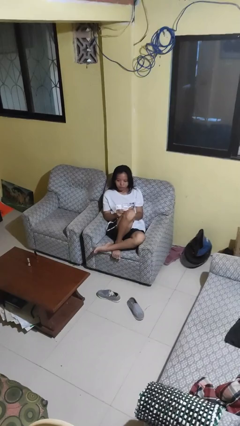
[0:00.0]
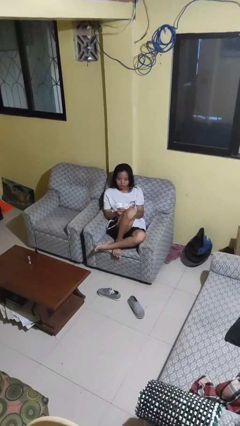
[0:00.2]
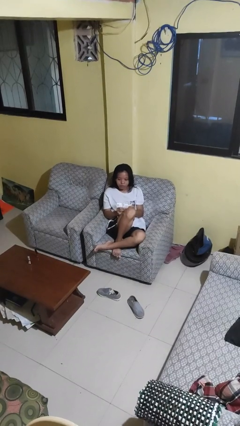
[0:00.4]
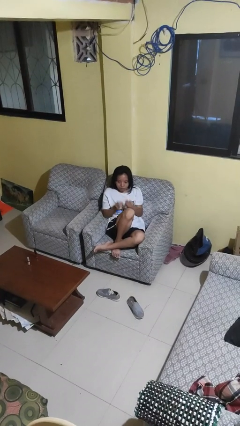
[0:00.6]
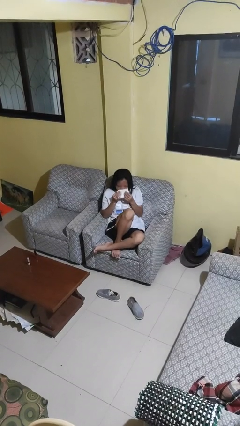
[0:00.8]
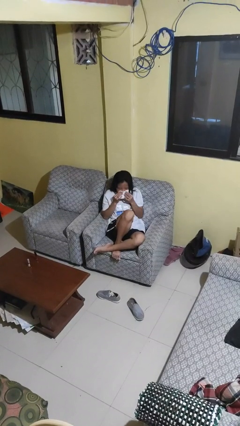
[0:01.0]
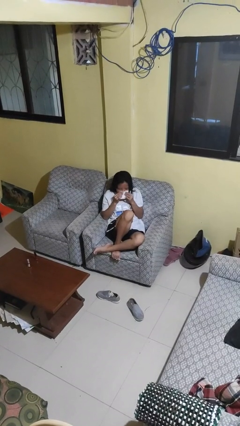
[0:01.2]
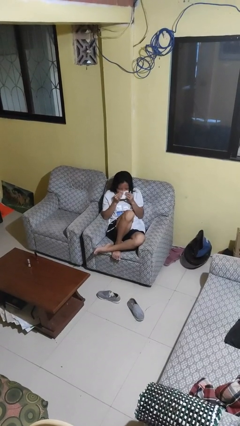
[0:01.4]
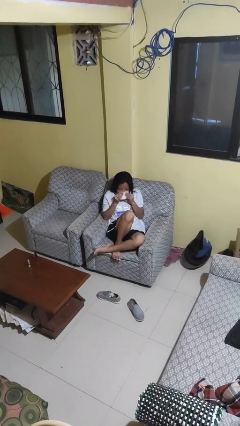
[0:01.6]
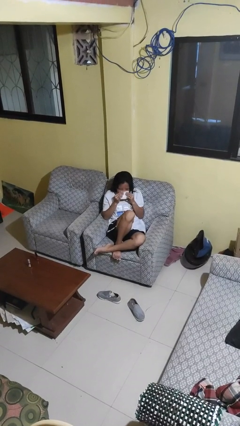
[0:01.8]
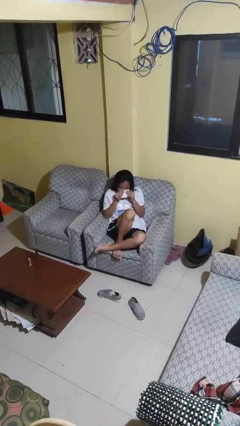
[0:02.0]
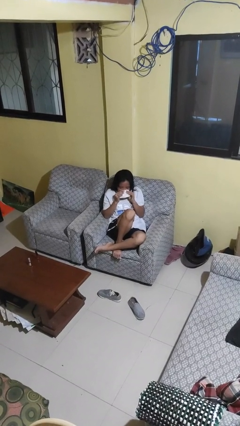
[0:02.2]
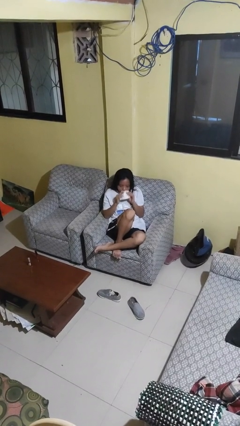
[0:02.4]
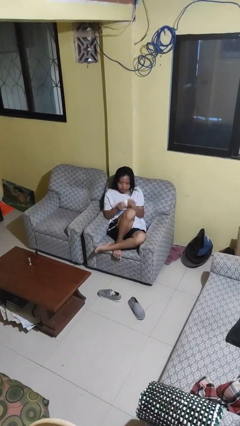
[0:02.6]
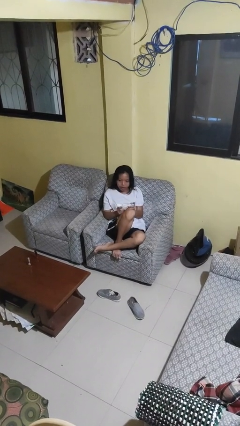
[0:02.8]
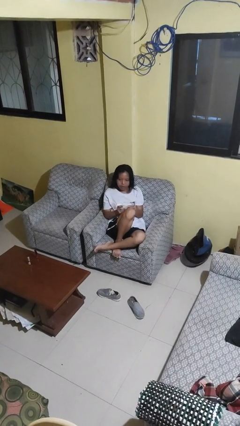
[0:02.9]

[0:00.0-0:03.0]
person blows nose

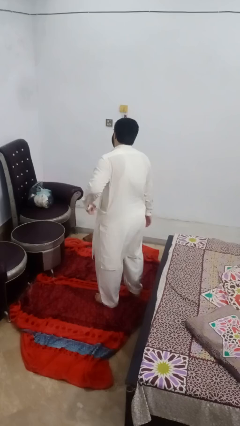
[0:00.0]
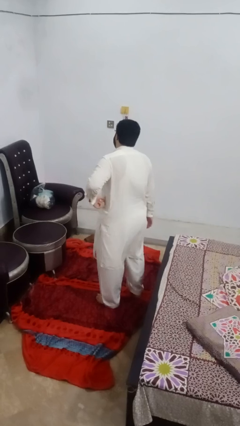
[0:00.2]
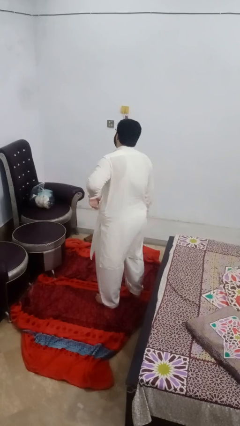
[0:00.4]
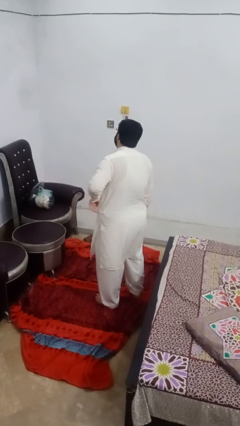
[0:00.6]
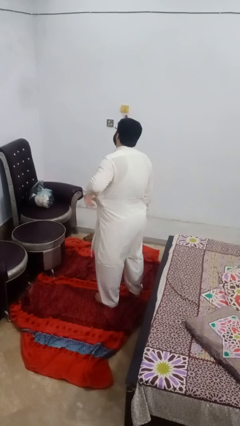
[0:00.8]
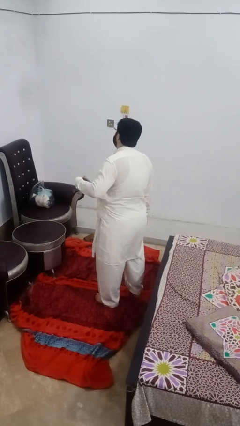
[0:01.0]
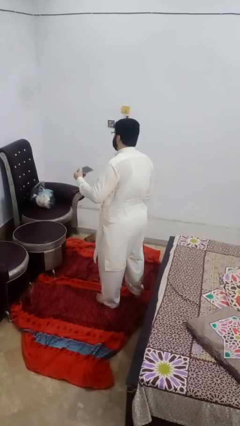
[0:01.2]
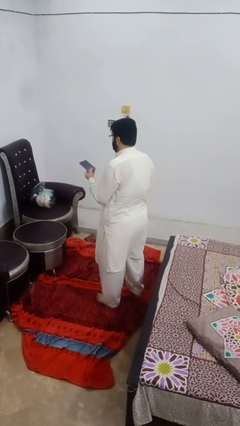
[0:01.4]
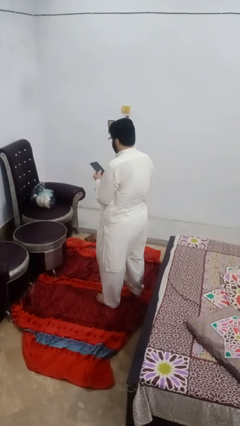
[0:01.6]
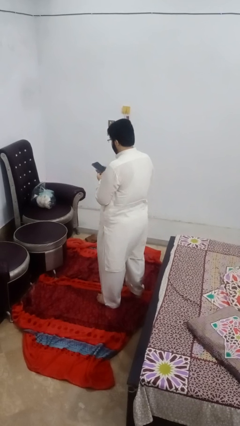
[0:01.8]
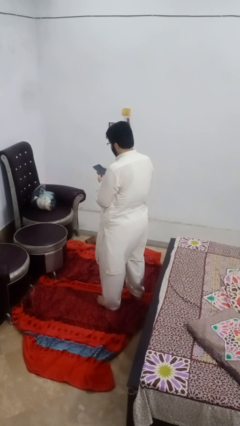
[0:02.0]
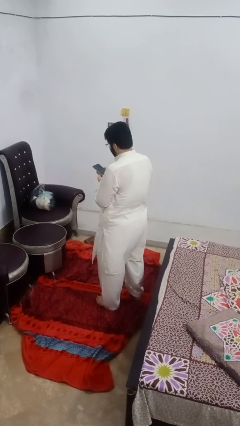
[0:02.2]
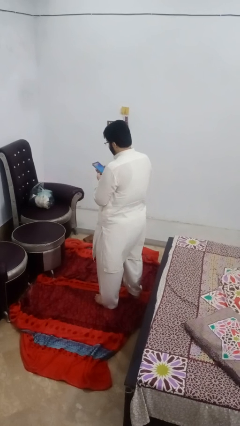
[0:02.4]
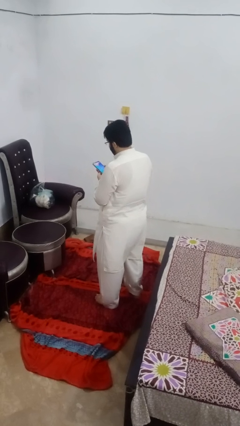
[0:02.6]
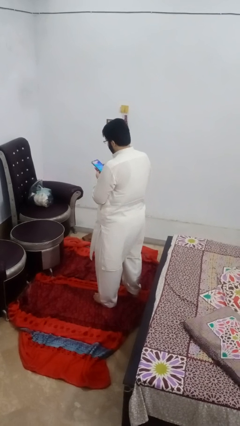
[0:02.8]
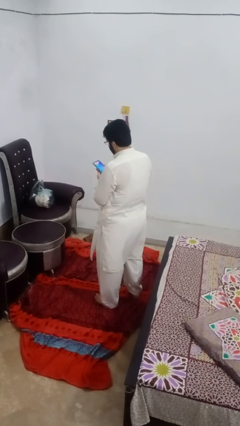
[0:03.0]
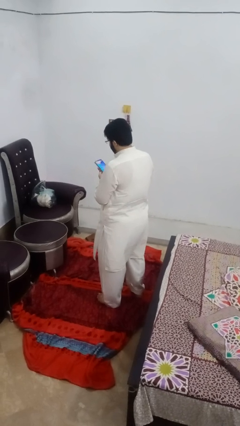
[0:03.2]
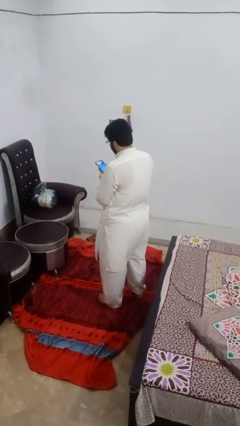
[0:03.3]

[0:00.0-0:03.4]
person takes phone from pocket

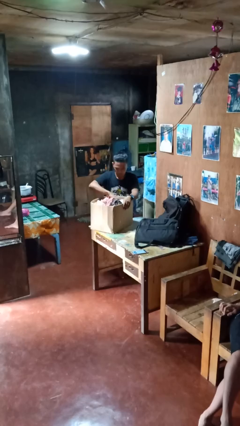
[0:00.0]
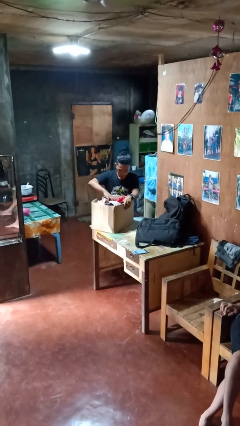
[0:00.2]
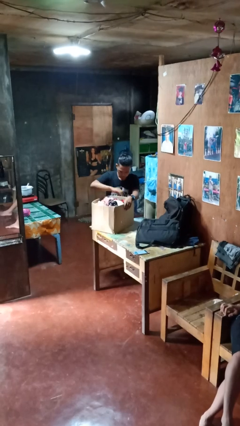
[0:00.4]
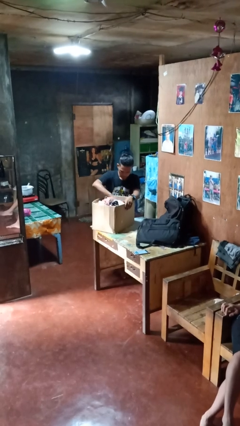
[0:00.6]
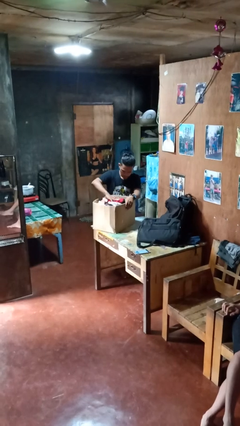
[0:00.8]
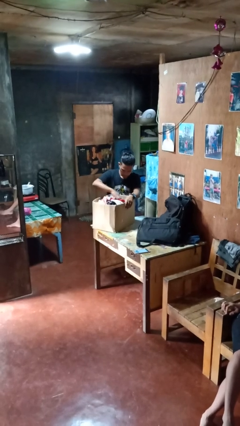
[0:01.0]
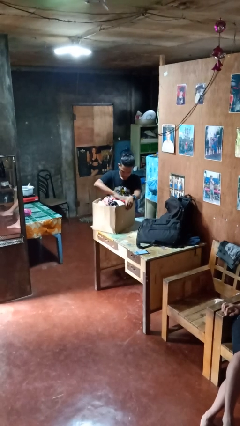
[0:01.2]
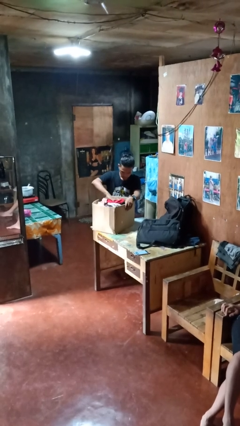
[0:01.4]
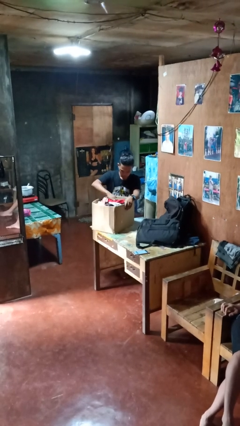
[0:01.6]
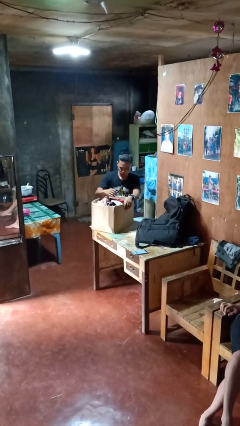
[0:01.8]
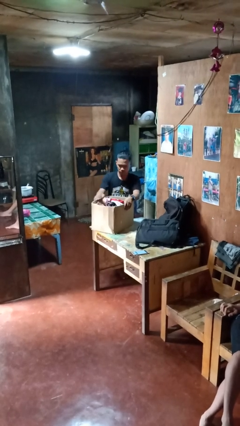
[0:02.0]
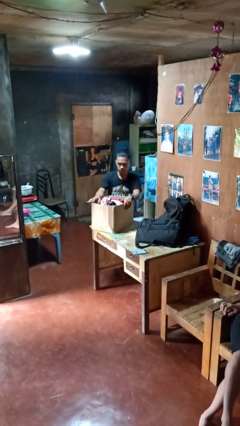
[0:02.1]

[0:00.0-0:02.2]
person searches in box

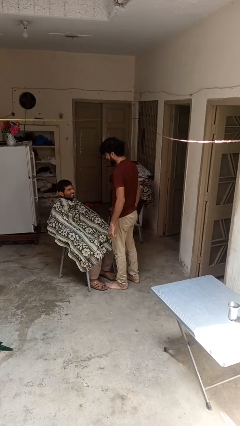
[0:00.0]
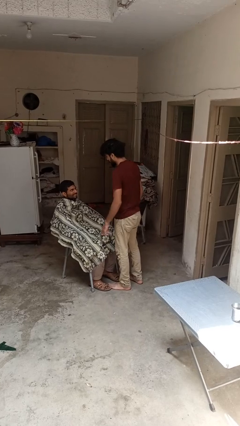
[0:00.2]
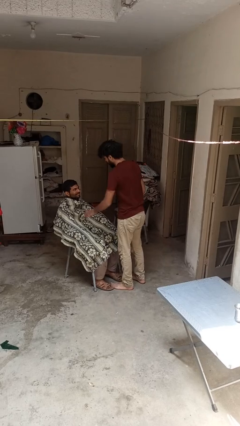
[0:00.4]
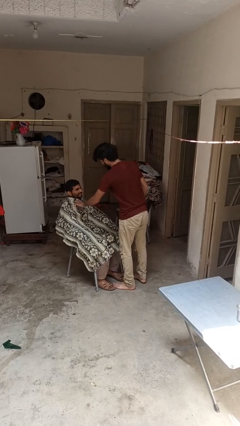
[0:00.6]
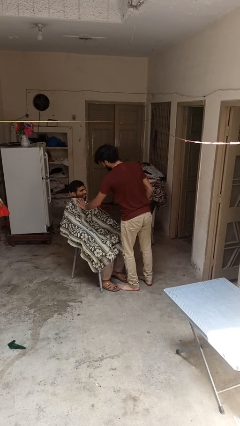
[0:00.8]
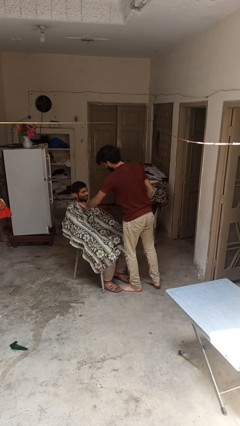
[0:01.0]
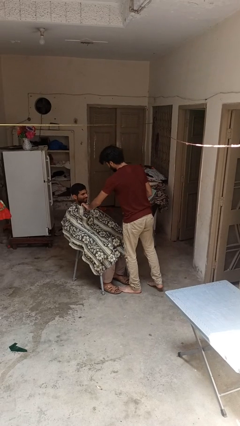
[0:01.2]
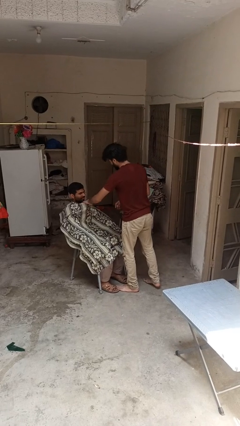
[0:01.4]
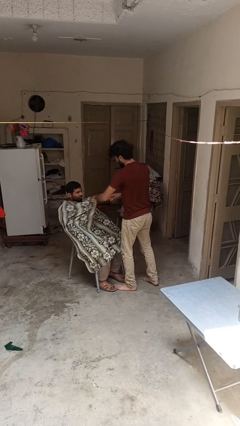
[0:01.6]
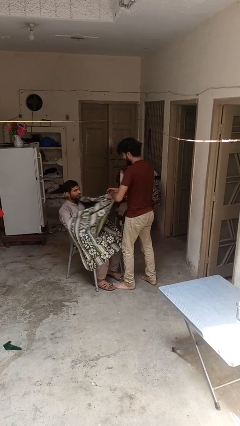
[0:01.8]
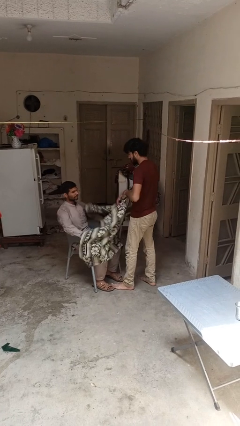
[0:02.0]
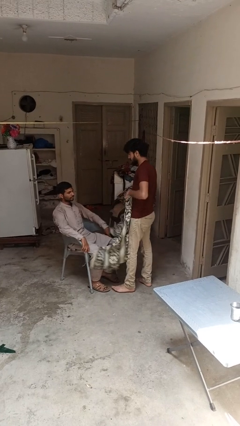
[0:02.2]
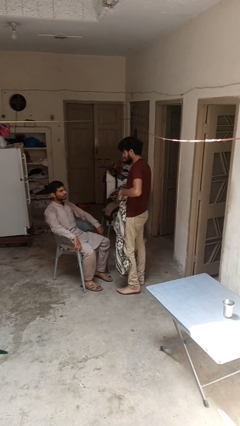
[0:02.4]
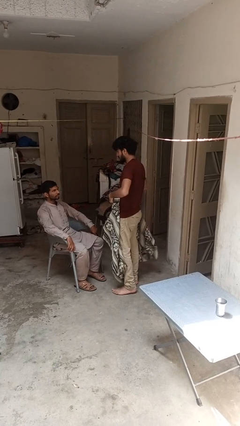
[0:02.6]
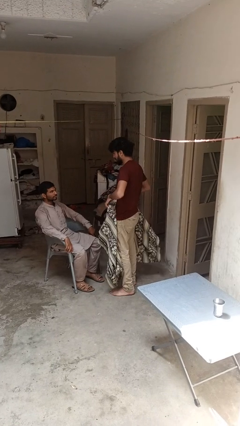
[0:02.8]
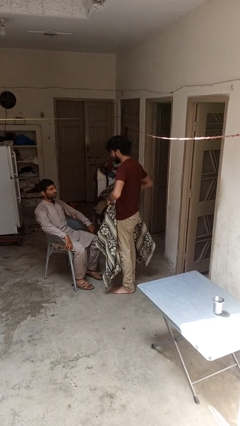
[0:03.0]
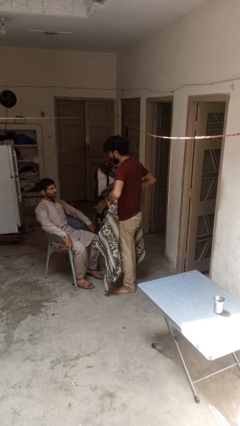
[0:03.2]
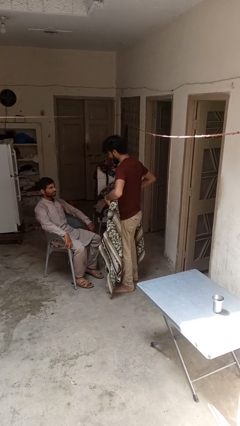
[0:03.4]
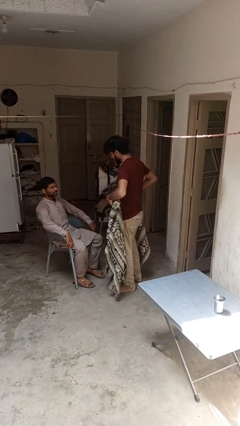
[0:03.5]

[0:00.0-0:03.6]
person uncovers friend with blanket

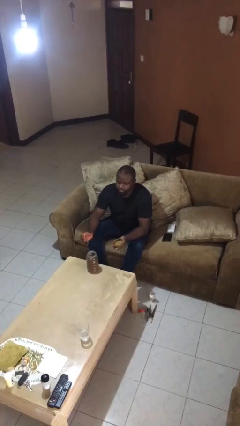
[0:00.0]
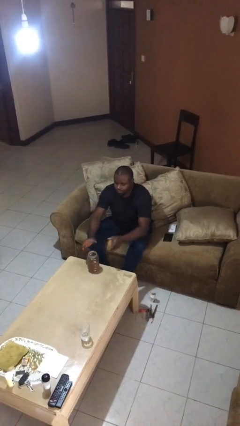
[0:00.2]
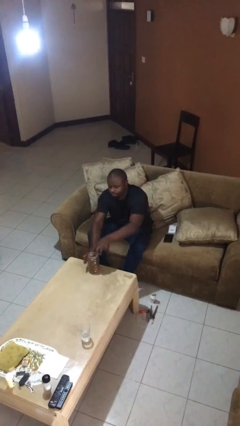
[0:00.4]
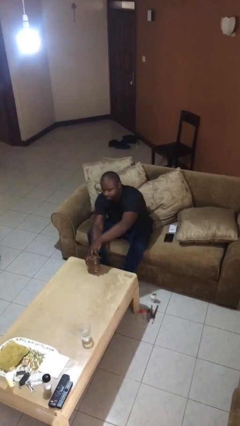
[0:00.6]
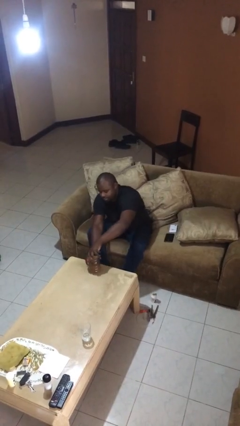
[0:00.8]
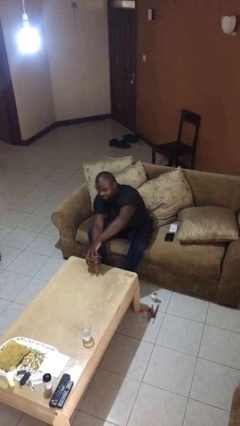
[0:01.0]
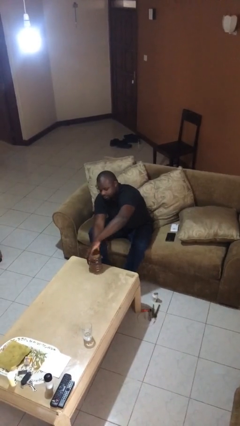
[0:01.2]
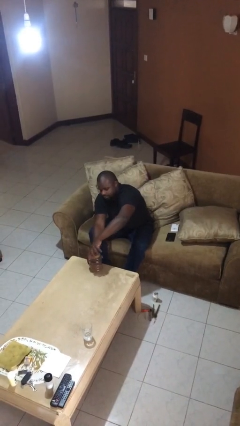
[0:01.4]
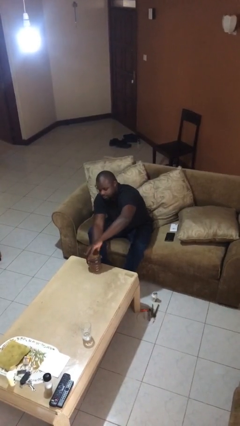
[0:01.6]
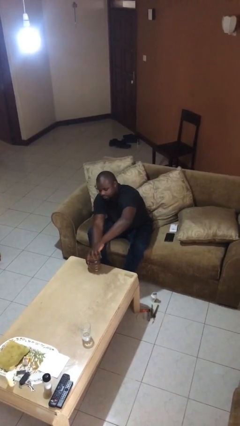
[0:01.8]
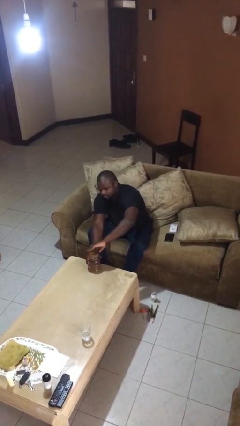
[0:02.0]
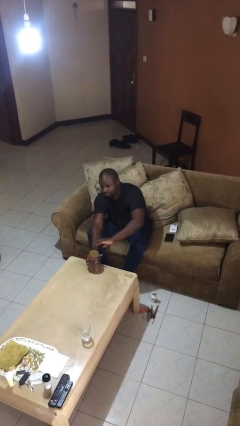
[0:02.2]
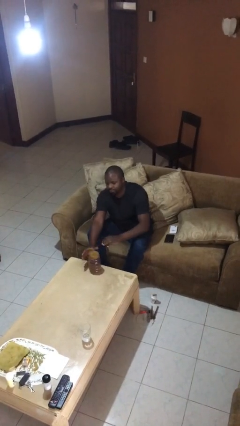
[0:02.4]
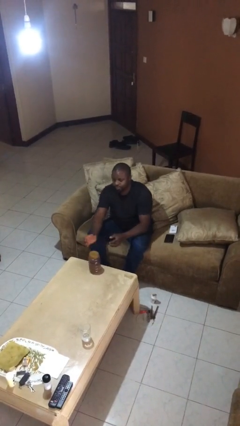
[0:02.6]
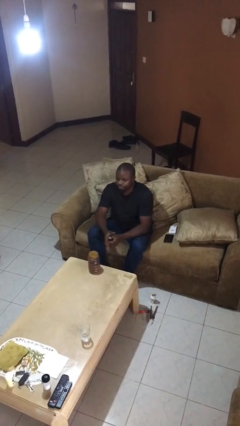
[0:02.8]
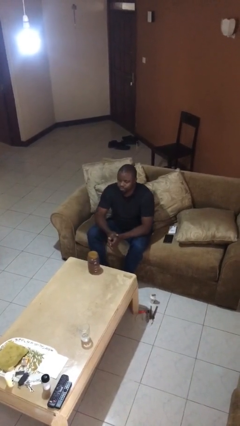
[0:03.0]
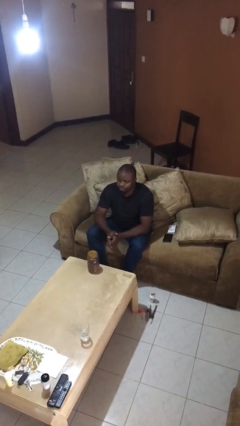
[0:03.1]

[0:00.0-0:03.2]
person closes jar

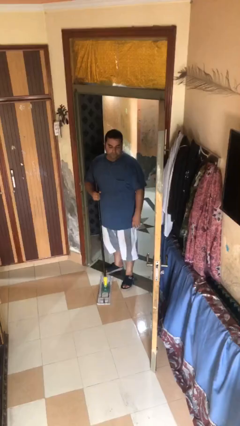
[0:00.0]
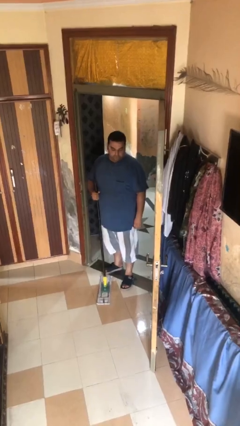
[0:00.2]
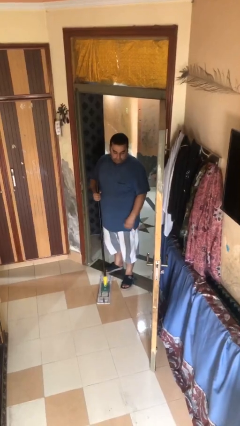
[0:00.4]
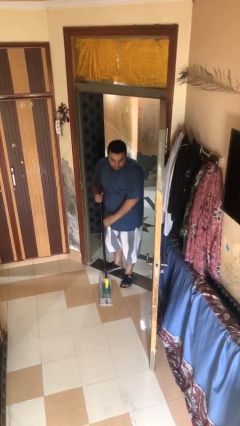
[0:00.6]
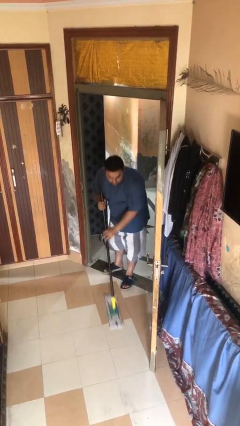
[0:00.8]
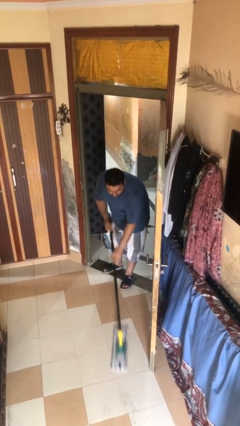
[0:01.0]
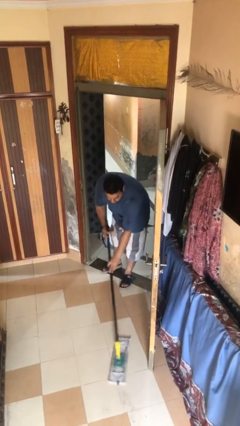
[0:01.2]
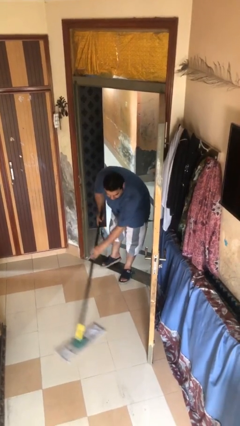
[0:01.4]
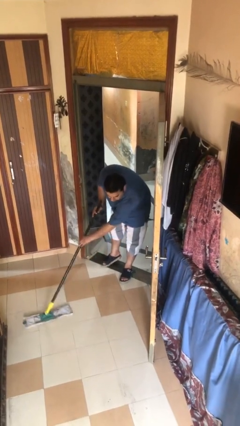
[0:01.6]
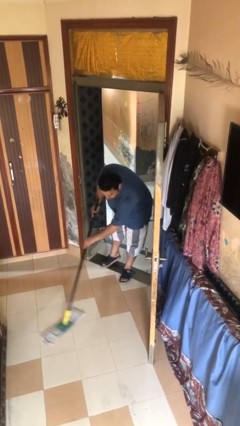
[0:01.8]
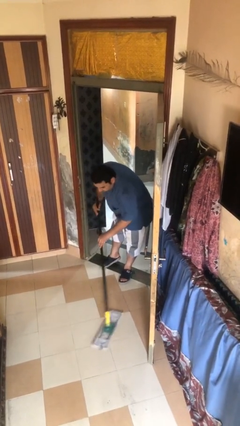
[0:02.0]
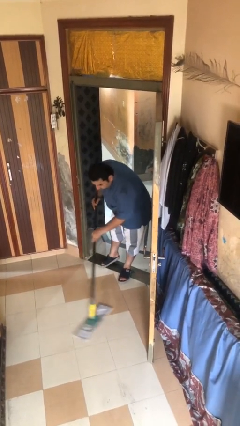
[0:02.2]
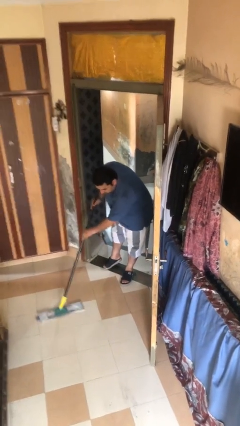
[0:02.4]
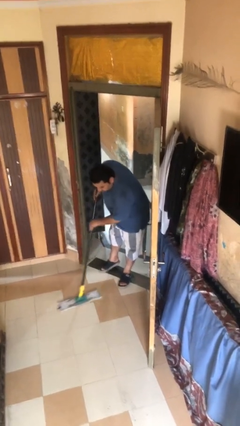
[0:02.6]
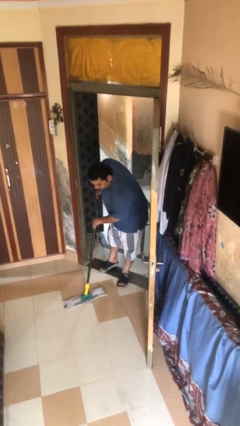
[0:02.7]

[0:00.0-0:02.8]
person mops
